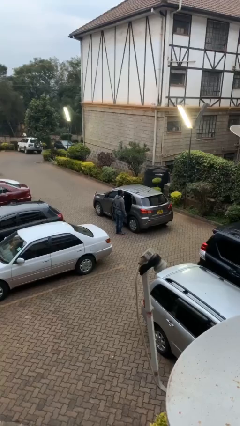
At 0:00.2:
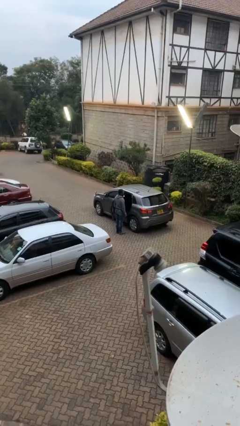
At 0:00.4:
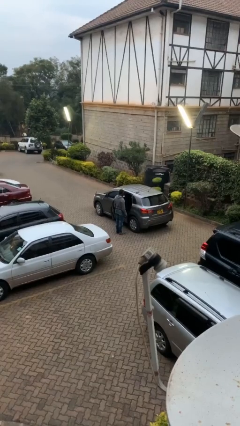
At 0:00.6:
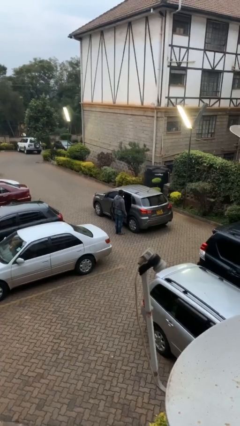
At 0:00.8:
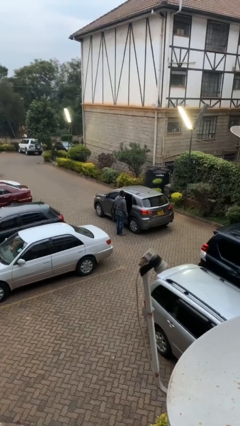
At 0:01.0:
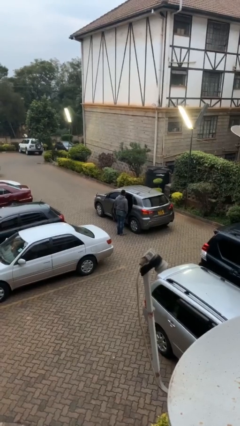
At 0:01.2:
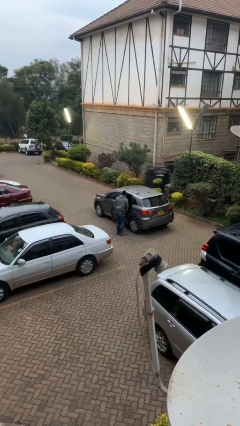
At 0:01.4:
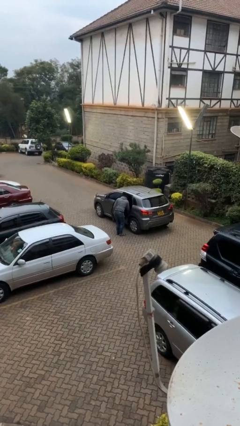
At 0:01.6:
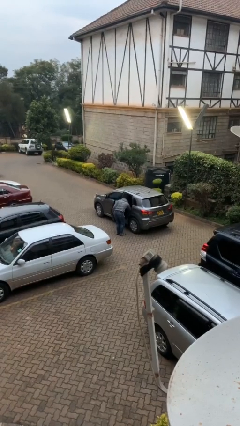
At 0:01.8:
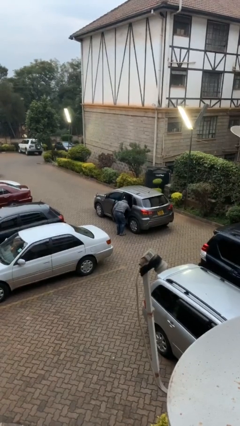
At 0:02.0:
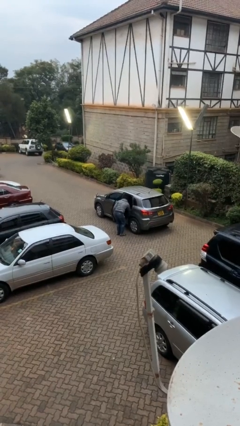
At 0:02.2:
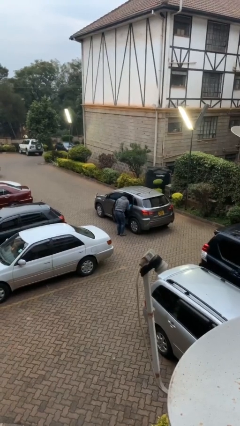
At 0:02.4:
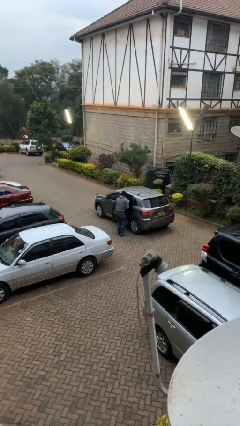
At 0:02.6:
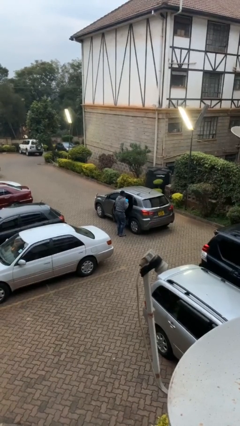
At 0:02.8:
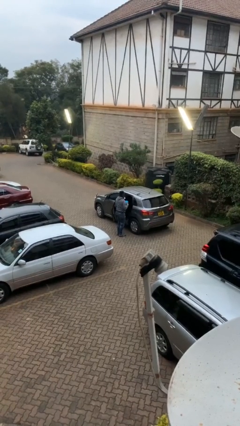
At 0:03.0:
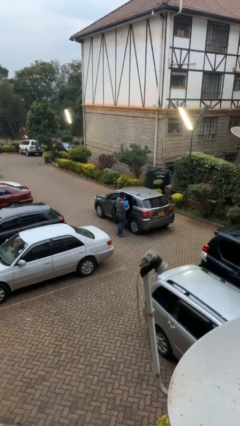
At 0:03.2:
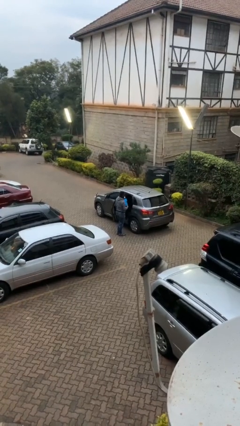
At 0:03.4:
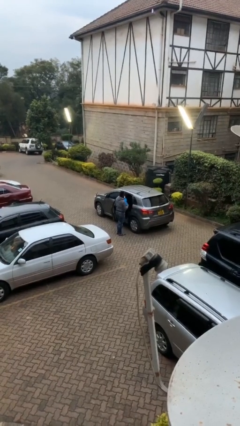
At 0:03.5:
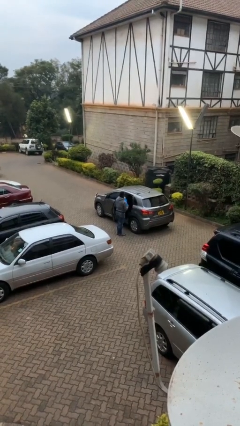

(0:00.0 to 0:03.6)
person unloads car

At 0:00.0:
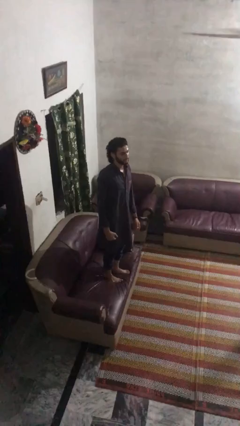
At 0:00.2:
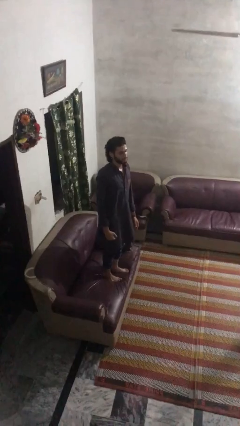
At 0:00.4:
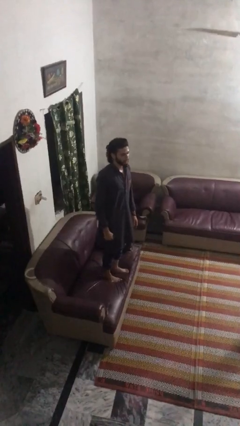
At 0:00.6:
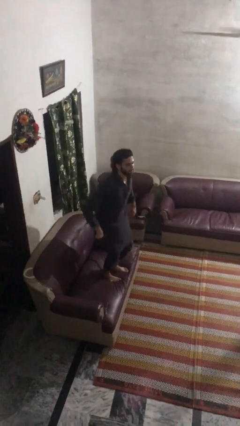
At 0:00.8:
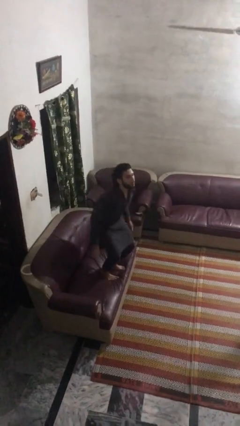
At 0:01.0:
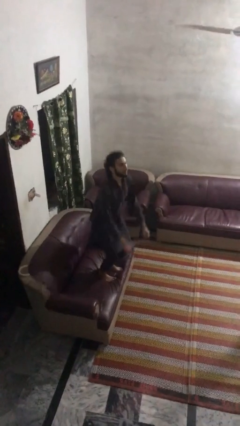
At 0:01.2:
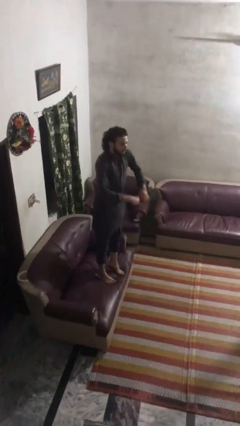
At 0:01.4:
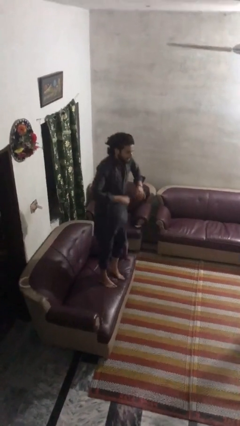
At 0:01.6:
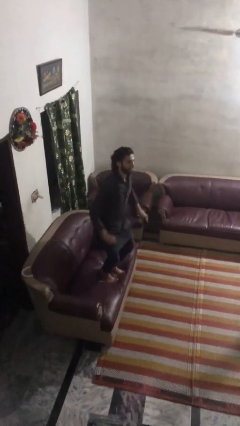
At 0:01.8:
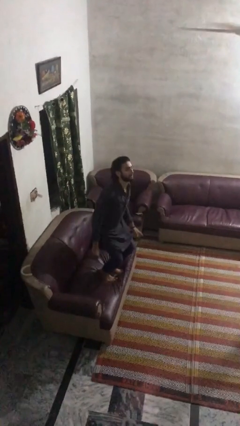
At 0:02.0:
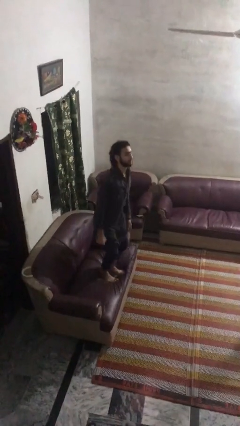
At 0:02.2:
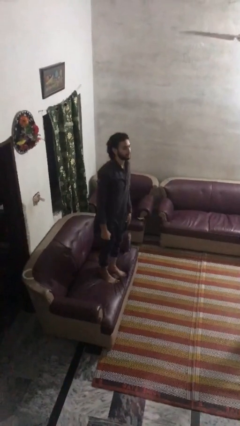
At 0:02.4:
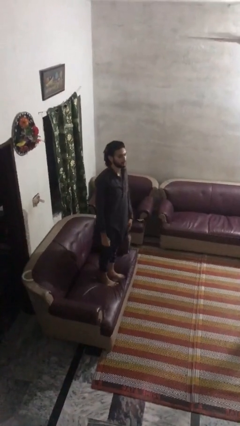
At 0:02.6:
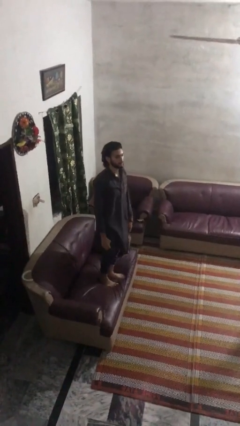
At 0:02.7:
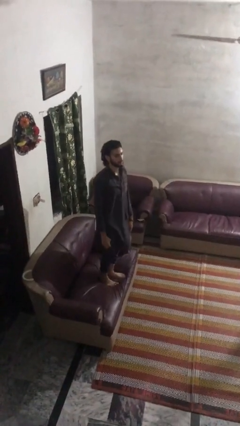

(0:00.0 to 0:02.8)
person jumps on couch

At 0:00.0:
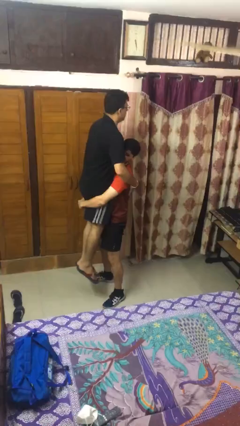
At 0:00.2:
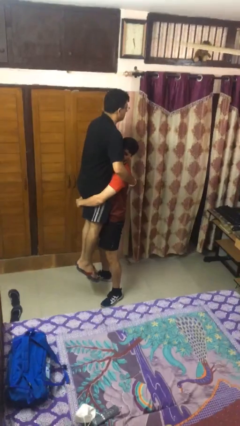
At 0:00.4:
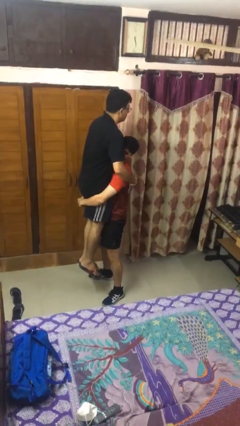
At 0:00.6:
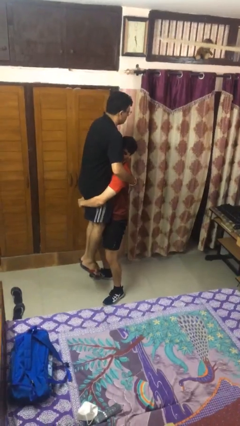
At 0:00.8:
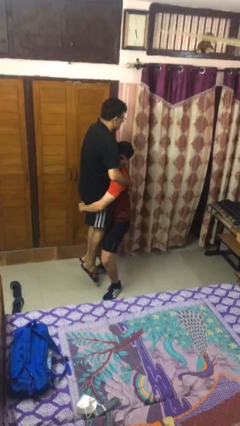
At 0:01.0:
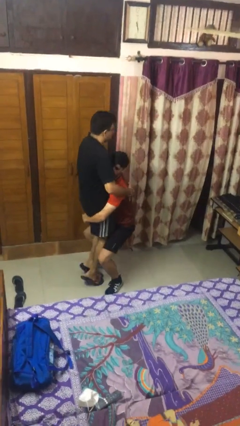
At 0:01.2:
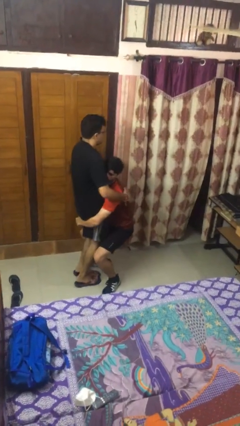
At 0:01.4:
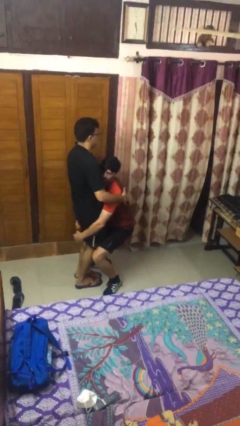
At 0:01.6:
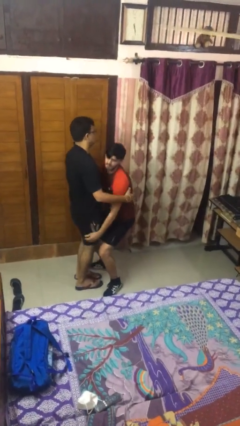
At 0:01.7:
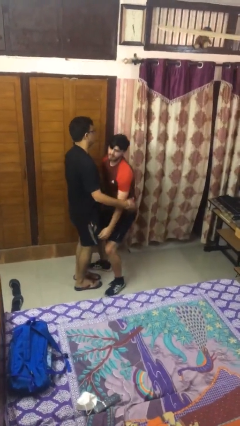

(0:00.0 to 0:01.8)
person puts down person

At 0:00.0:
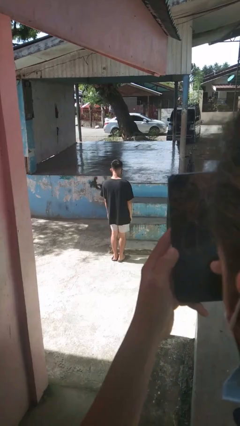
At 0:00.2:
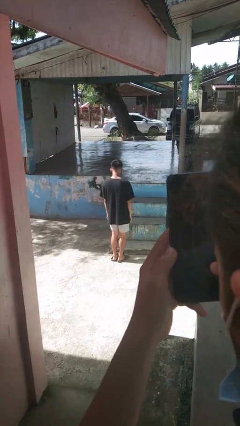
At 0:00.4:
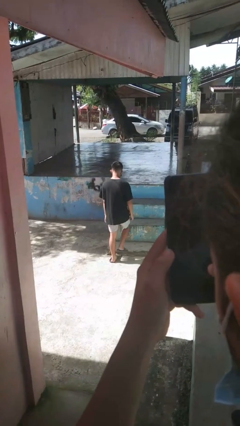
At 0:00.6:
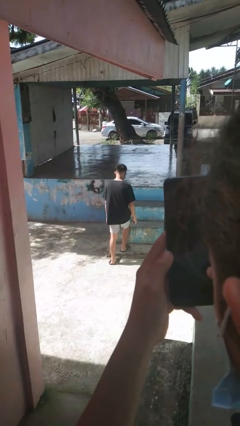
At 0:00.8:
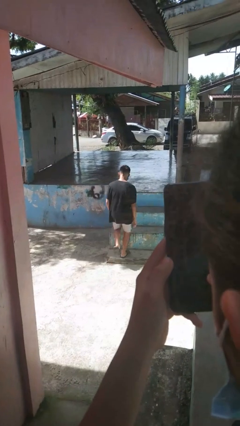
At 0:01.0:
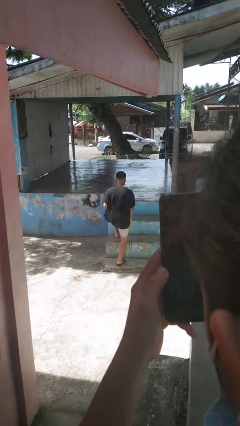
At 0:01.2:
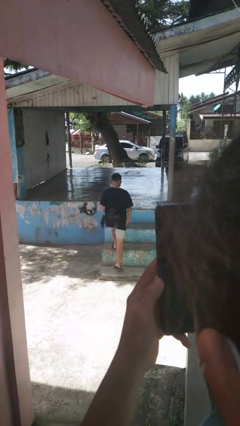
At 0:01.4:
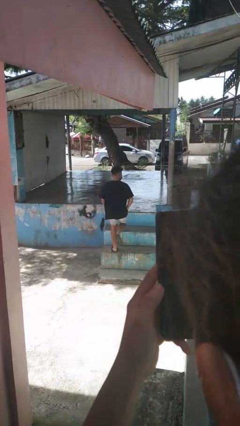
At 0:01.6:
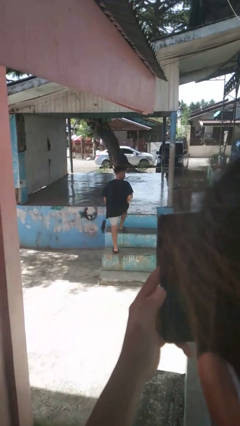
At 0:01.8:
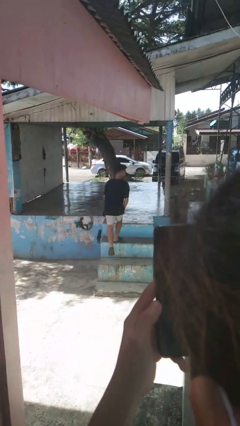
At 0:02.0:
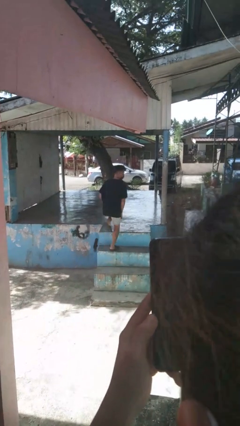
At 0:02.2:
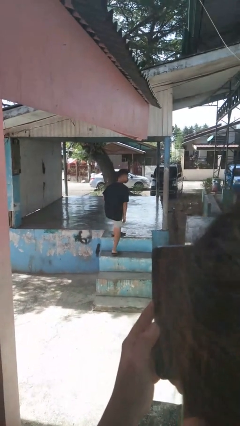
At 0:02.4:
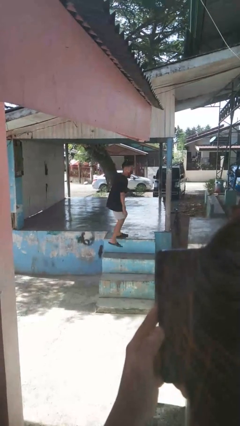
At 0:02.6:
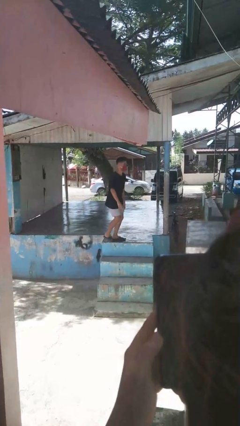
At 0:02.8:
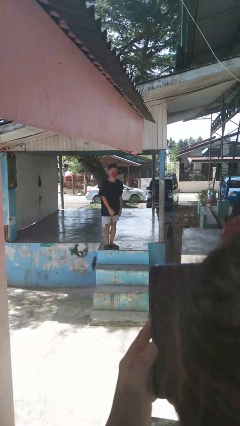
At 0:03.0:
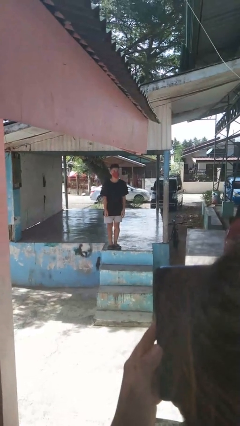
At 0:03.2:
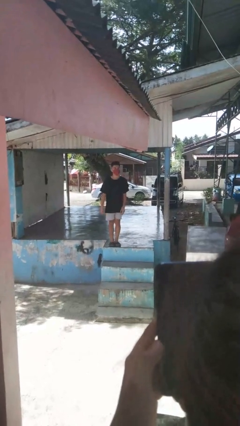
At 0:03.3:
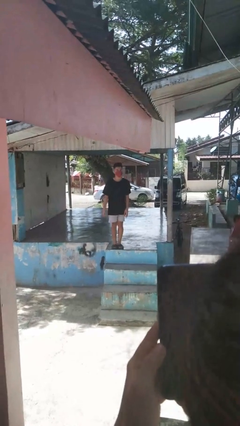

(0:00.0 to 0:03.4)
person climbs up stairs

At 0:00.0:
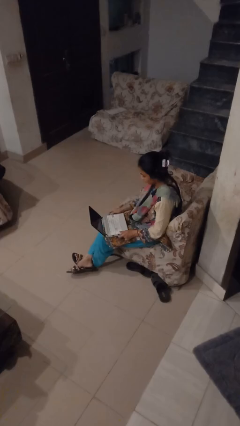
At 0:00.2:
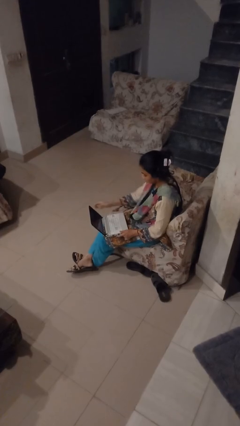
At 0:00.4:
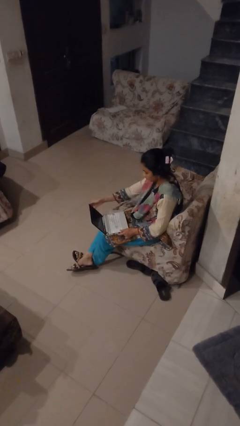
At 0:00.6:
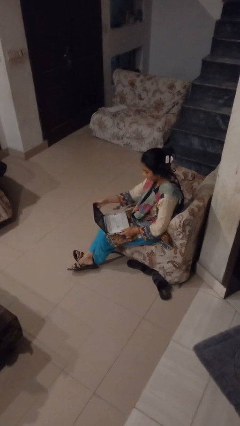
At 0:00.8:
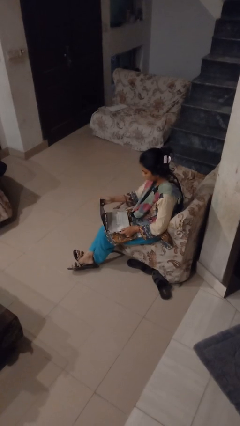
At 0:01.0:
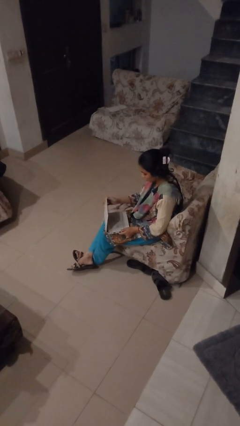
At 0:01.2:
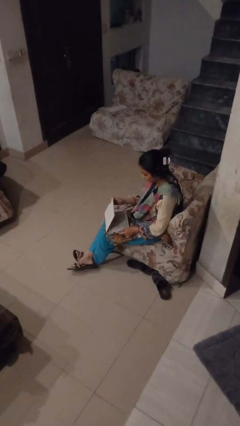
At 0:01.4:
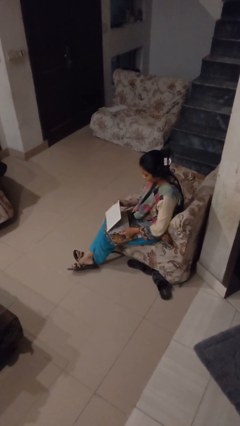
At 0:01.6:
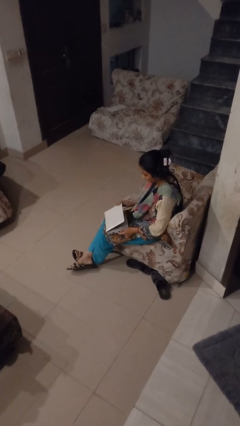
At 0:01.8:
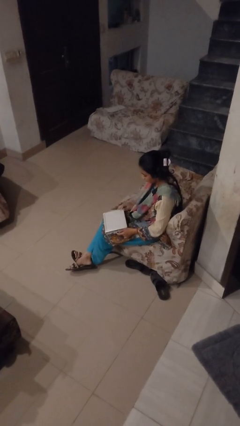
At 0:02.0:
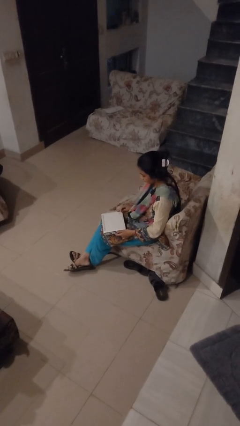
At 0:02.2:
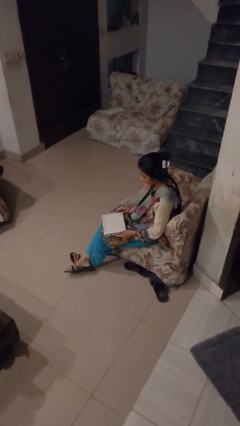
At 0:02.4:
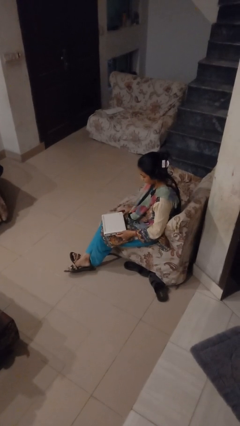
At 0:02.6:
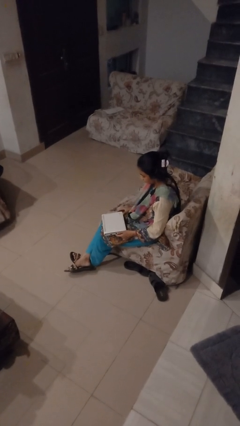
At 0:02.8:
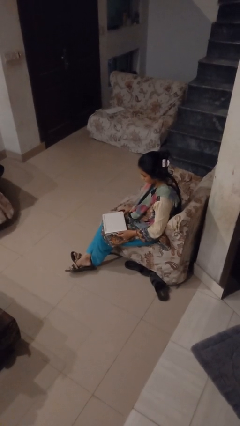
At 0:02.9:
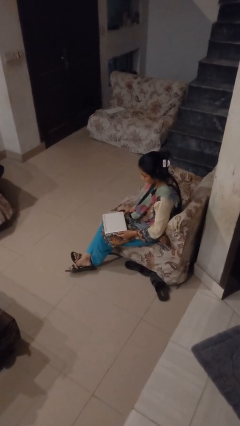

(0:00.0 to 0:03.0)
person closes laptop

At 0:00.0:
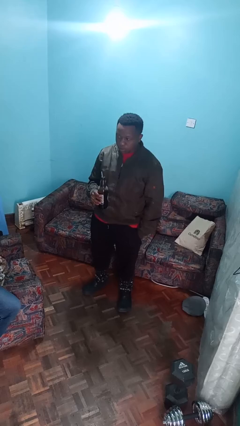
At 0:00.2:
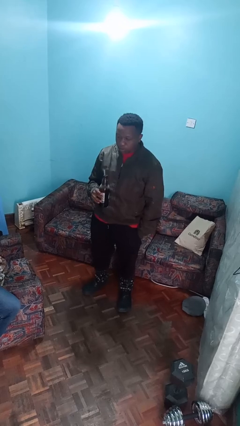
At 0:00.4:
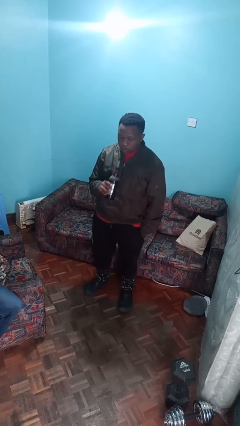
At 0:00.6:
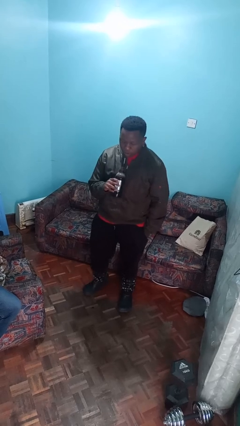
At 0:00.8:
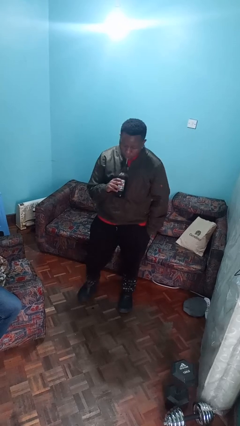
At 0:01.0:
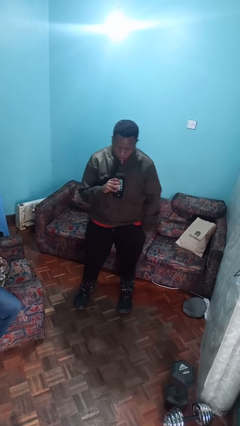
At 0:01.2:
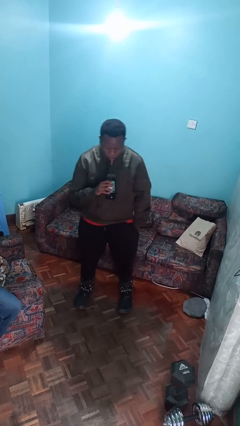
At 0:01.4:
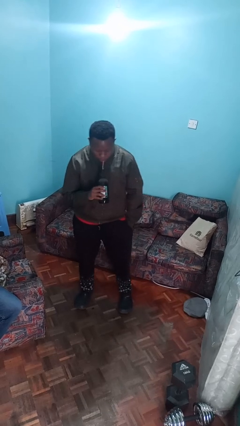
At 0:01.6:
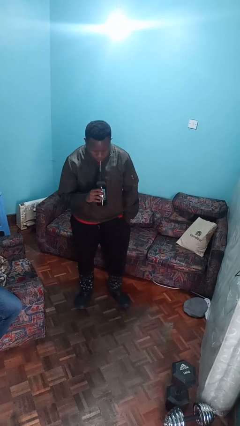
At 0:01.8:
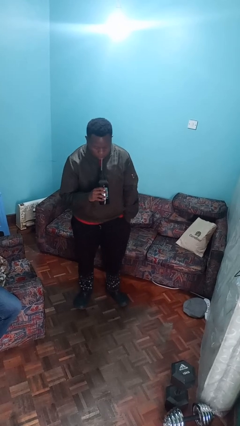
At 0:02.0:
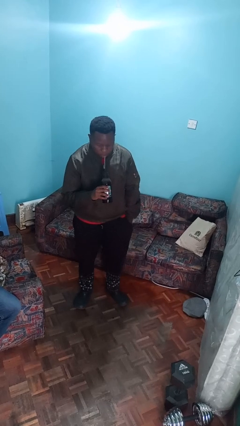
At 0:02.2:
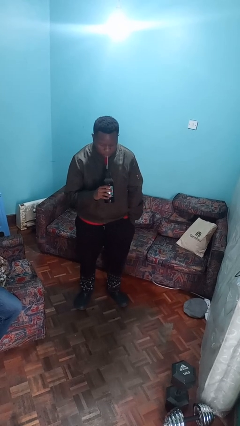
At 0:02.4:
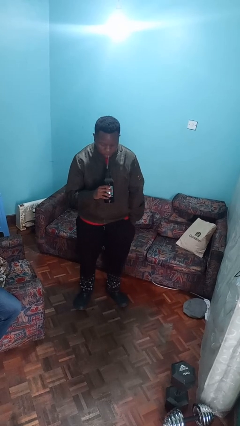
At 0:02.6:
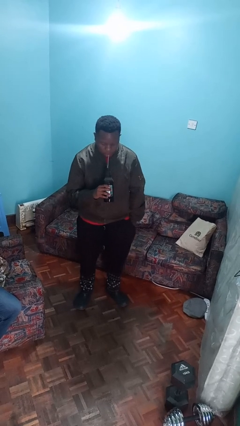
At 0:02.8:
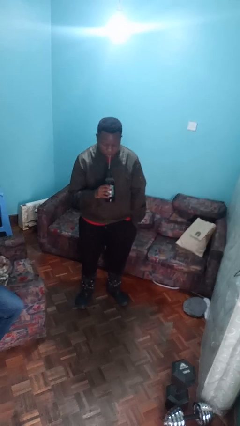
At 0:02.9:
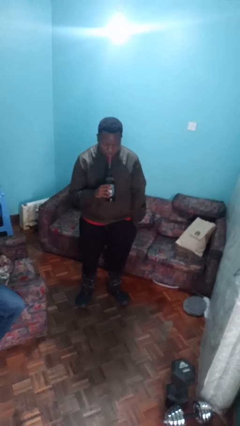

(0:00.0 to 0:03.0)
person drinks from straw
